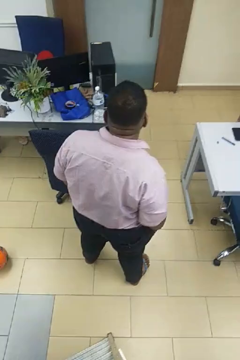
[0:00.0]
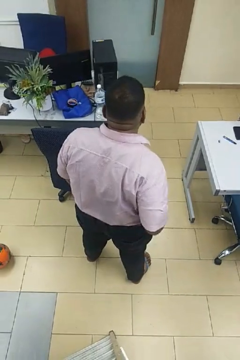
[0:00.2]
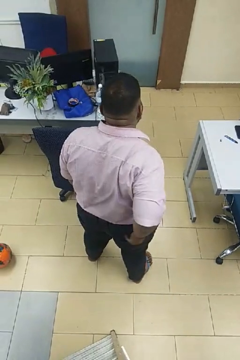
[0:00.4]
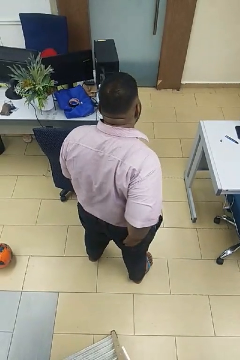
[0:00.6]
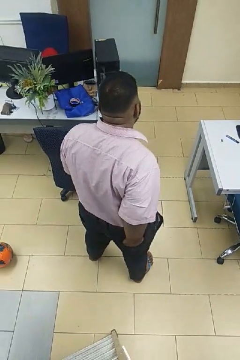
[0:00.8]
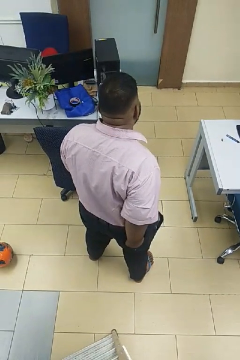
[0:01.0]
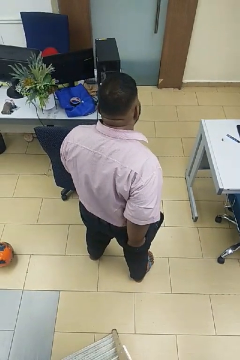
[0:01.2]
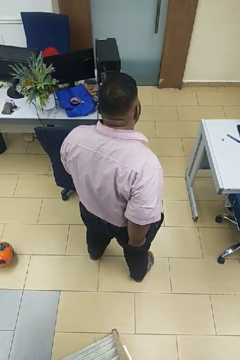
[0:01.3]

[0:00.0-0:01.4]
person puts hands in back pockets

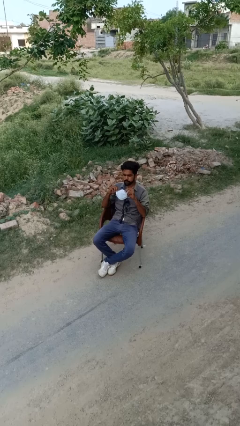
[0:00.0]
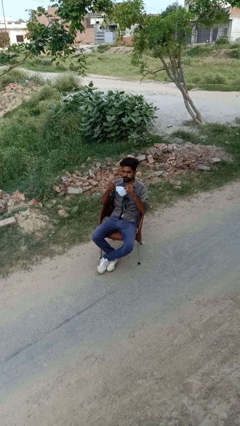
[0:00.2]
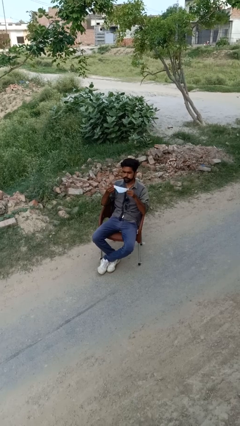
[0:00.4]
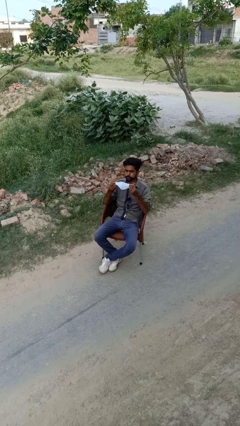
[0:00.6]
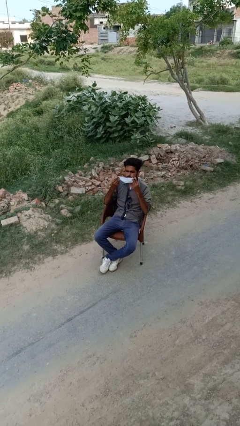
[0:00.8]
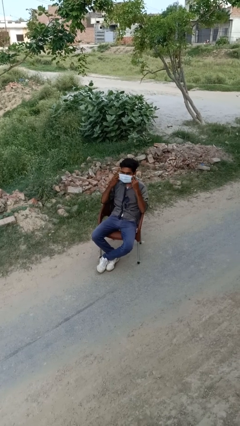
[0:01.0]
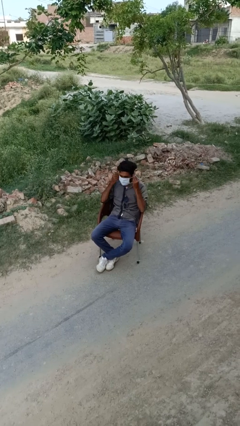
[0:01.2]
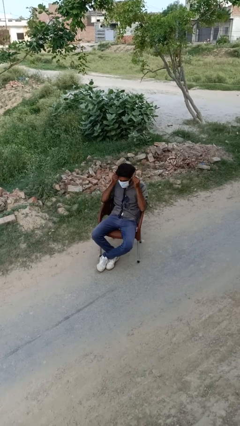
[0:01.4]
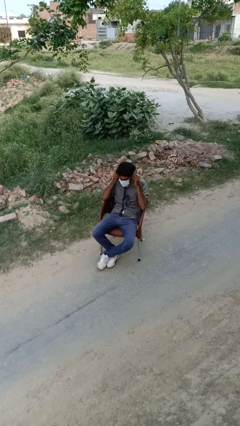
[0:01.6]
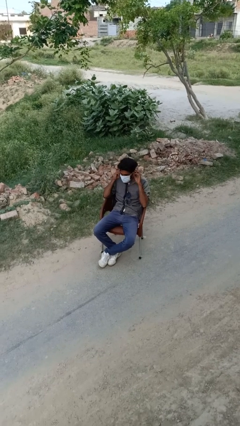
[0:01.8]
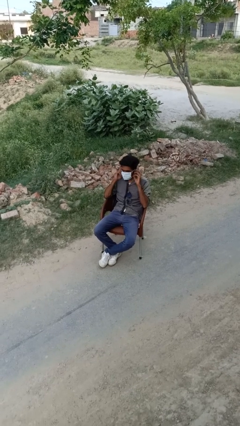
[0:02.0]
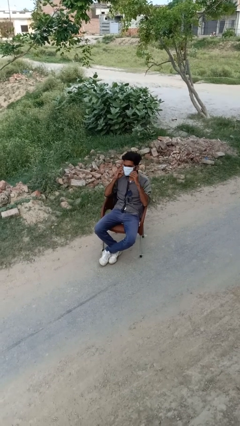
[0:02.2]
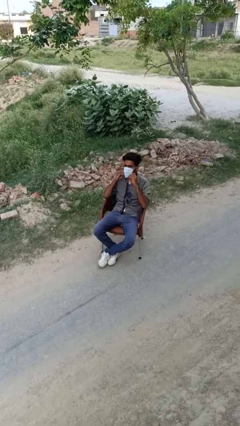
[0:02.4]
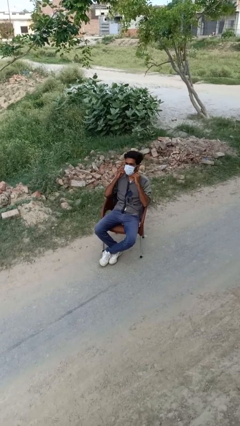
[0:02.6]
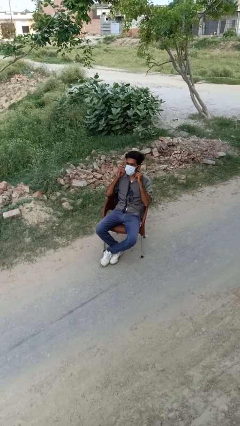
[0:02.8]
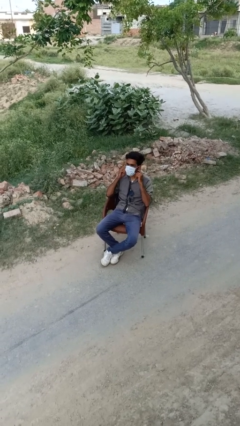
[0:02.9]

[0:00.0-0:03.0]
person puts on facemask

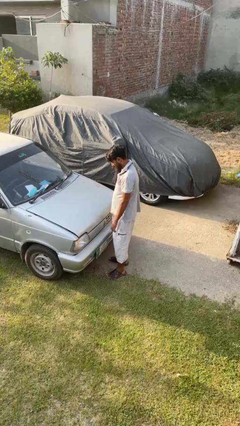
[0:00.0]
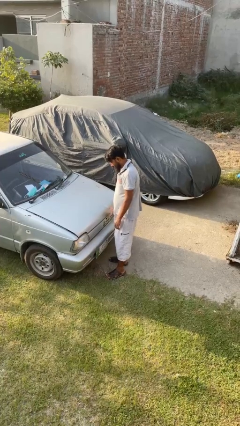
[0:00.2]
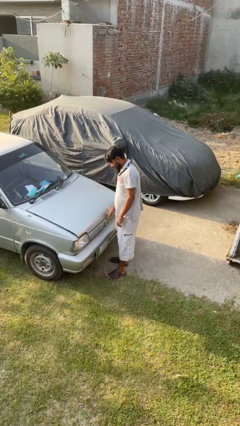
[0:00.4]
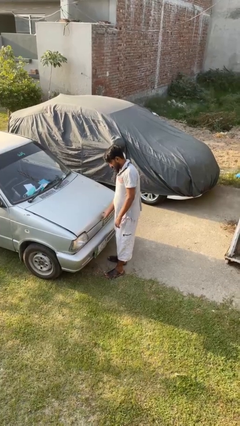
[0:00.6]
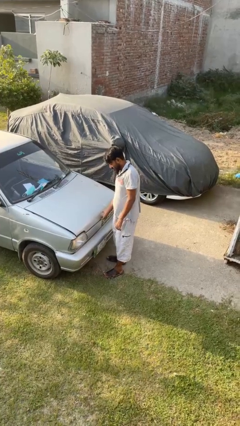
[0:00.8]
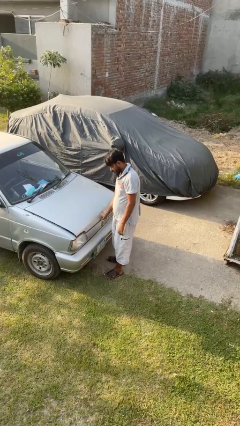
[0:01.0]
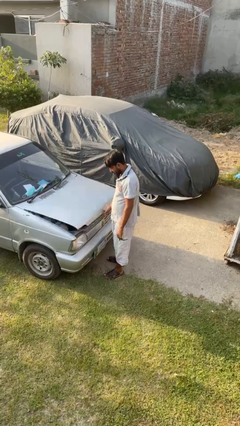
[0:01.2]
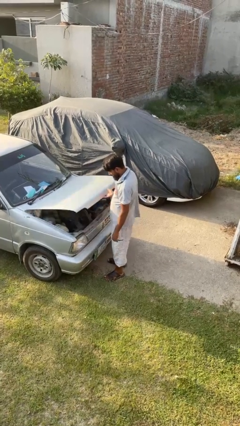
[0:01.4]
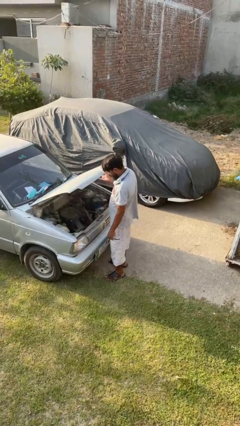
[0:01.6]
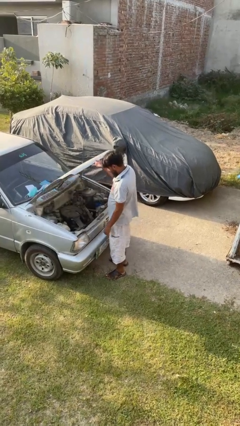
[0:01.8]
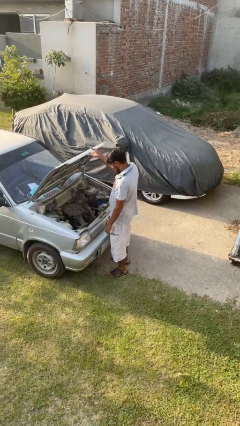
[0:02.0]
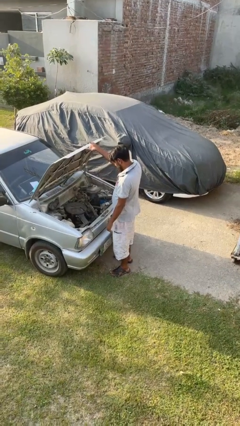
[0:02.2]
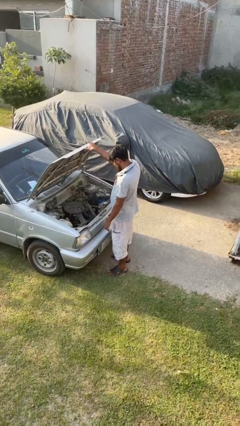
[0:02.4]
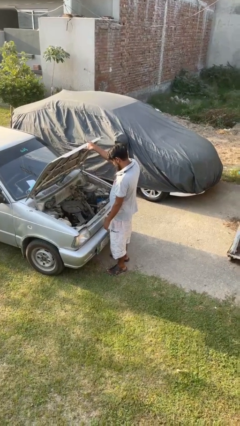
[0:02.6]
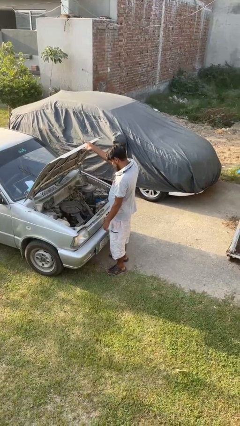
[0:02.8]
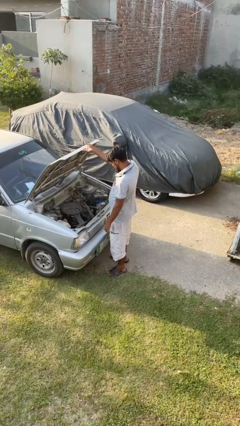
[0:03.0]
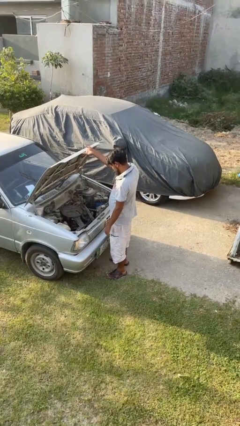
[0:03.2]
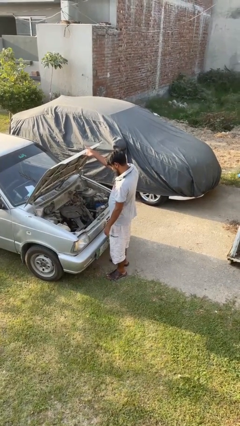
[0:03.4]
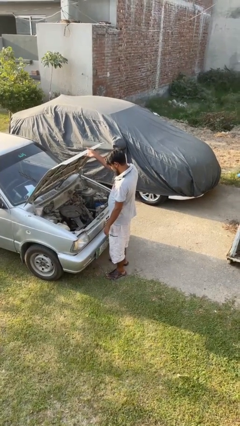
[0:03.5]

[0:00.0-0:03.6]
person opens car hood

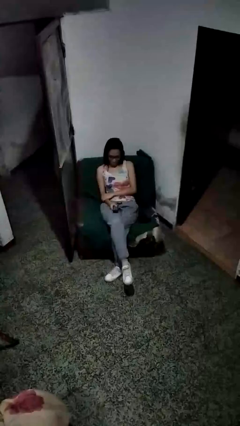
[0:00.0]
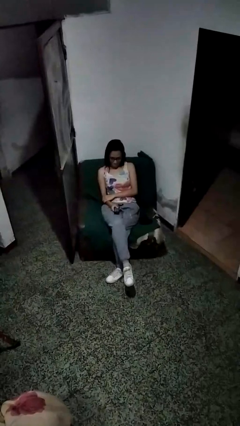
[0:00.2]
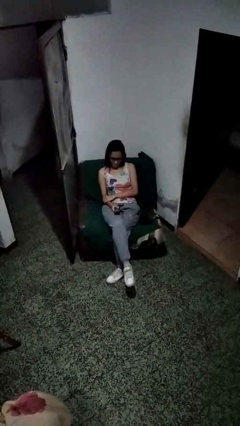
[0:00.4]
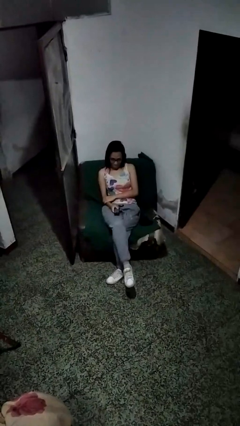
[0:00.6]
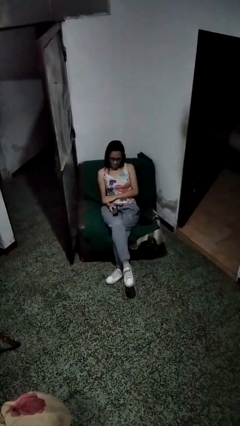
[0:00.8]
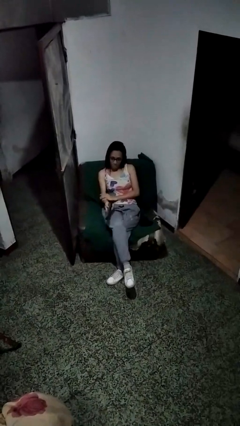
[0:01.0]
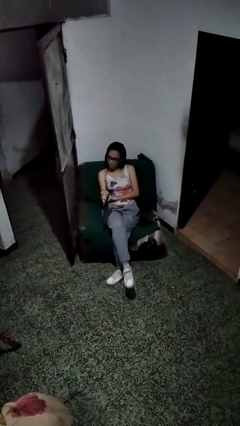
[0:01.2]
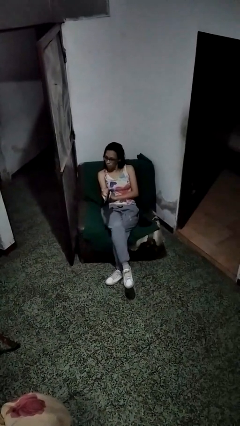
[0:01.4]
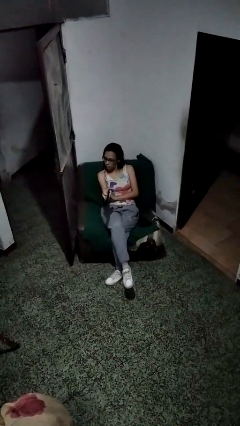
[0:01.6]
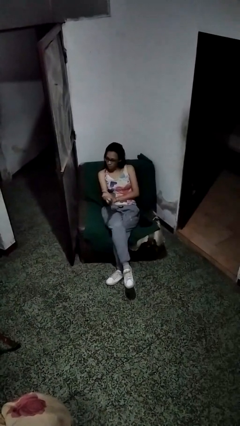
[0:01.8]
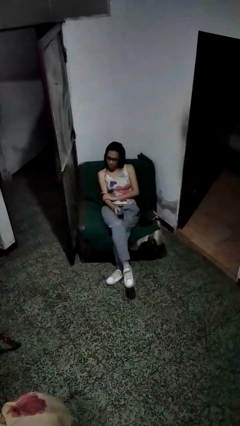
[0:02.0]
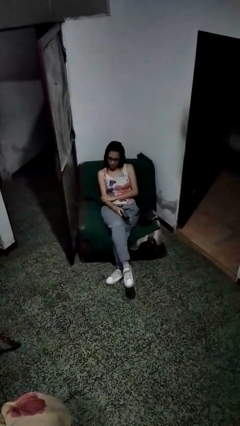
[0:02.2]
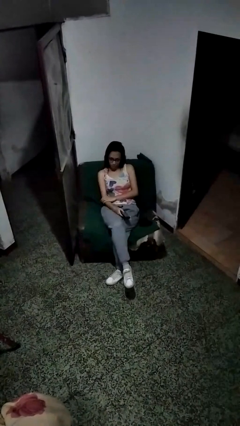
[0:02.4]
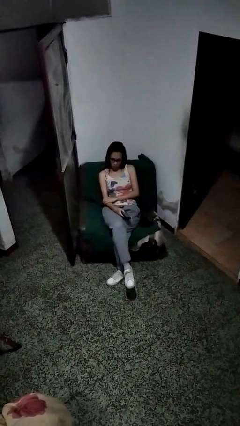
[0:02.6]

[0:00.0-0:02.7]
person uses television remote

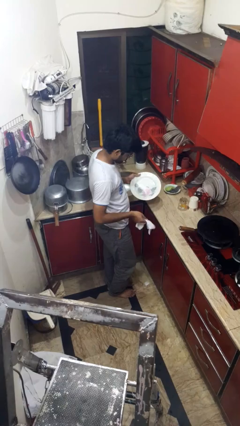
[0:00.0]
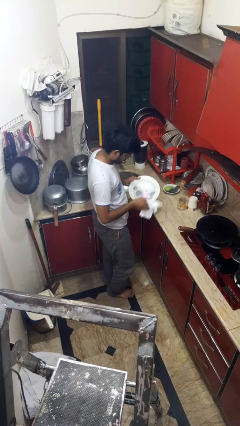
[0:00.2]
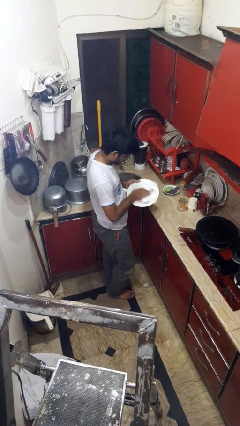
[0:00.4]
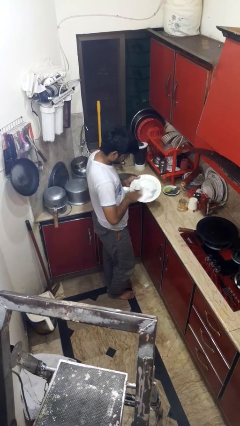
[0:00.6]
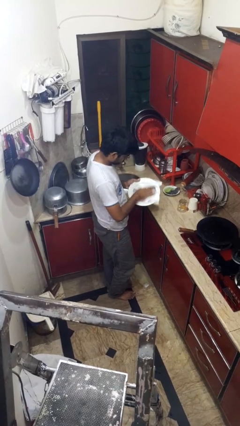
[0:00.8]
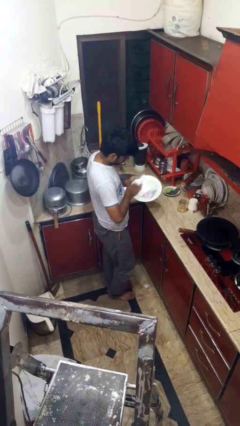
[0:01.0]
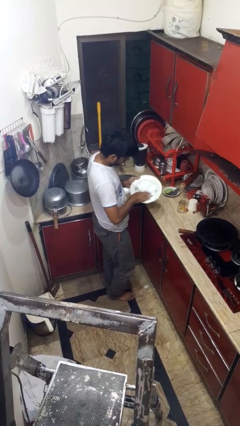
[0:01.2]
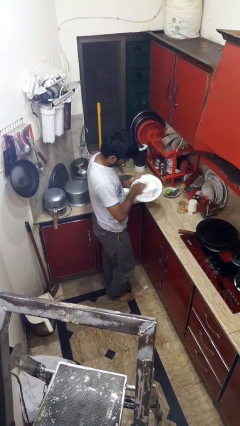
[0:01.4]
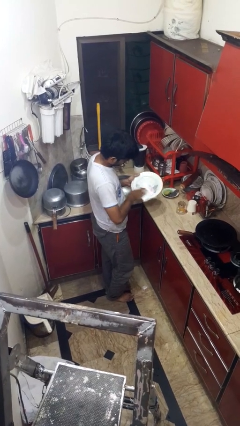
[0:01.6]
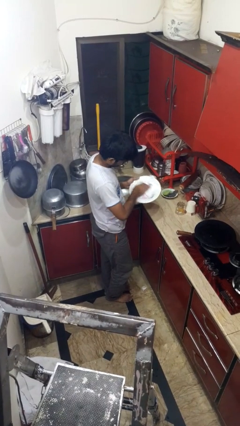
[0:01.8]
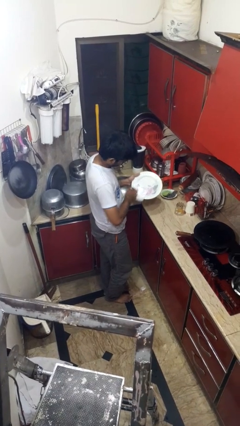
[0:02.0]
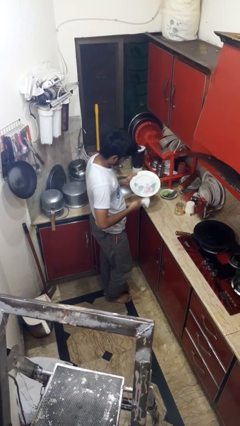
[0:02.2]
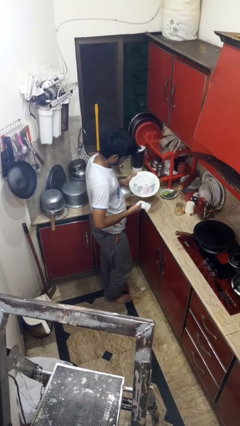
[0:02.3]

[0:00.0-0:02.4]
person dries dish

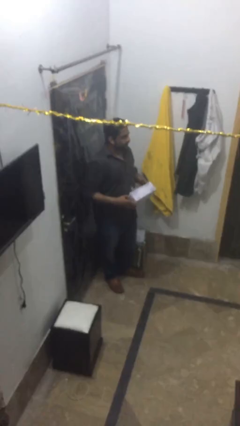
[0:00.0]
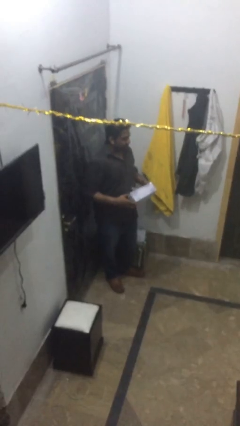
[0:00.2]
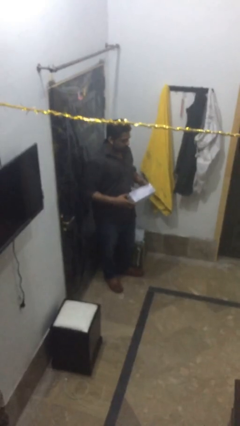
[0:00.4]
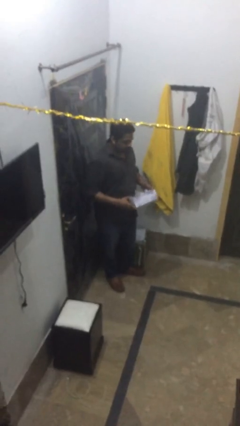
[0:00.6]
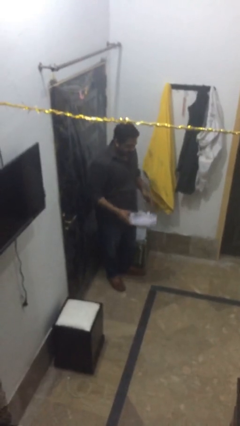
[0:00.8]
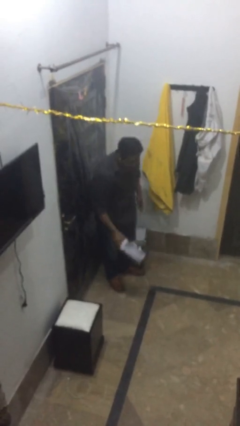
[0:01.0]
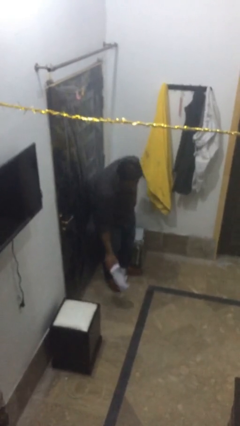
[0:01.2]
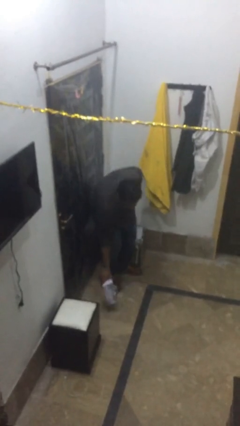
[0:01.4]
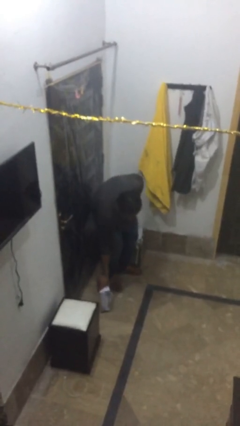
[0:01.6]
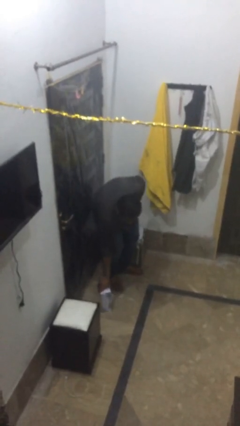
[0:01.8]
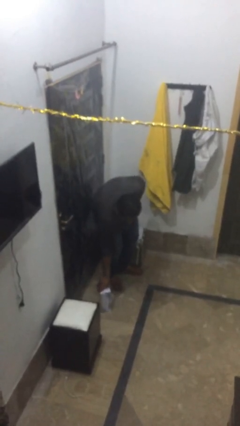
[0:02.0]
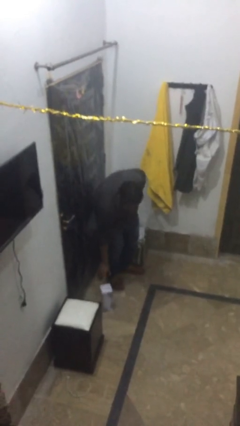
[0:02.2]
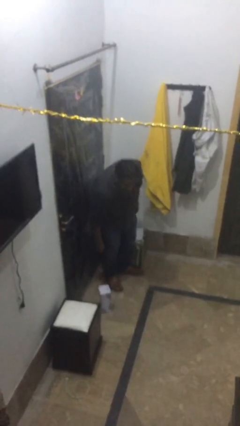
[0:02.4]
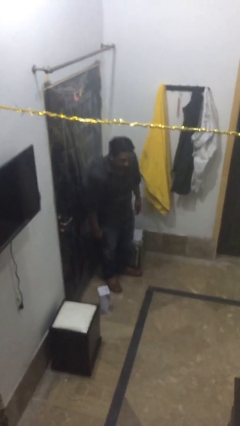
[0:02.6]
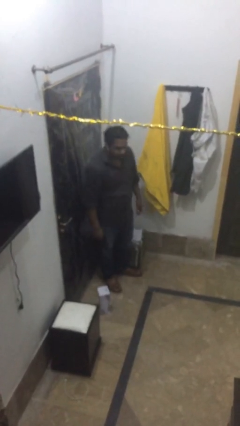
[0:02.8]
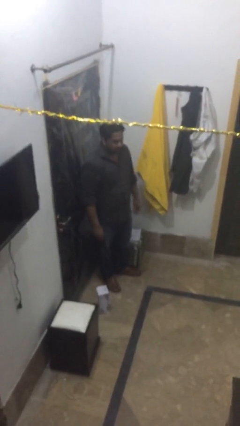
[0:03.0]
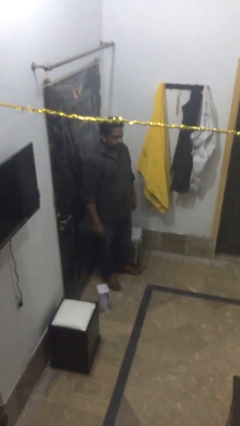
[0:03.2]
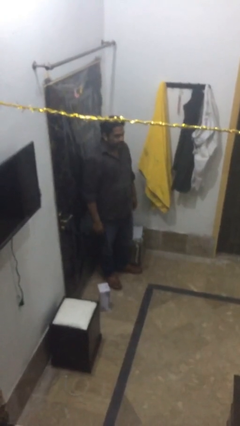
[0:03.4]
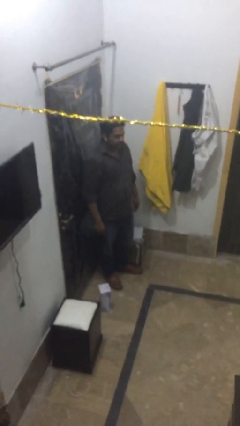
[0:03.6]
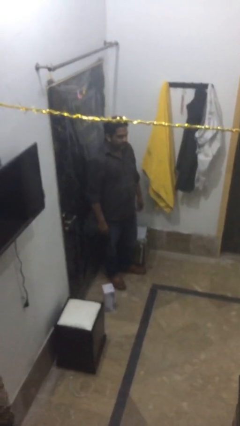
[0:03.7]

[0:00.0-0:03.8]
person puts down object on floor

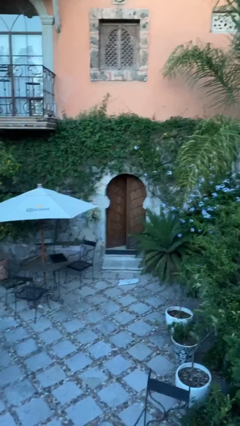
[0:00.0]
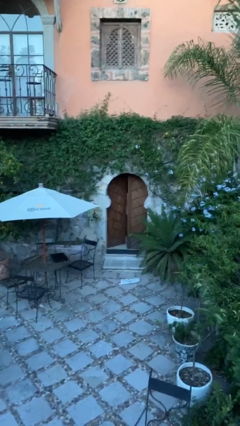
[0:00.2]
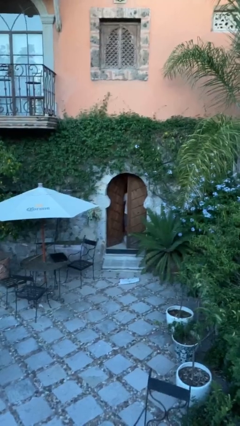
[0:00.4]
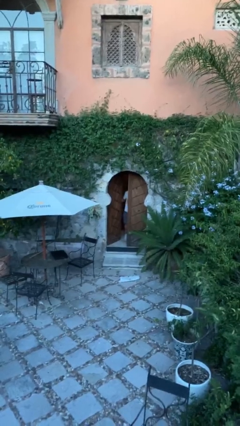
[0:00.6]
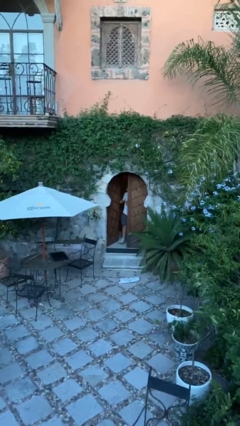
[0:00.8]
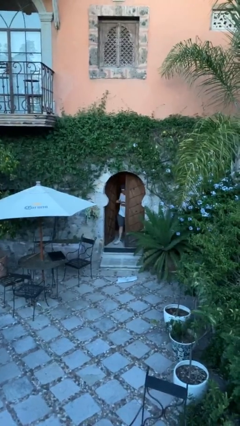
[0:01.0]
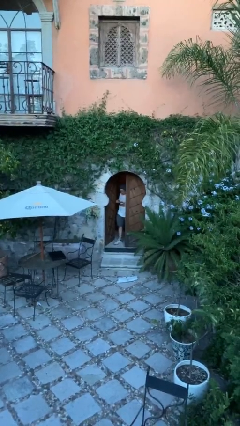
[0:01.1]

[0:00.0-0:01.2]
person opens facility door
